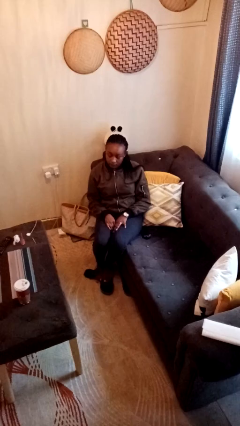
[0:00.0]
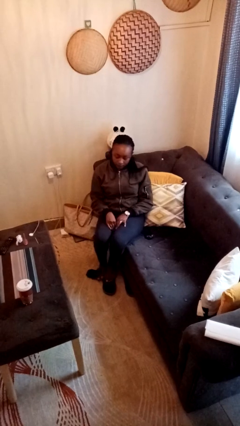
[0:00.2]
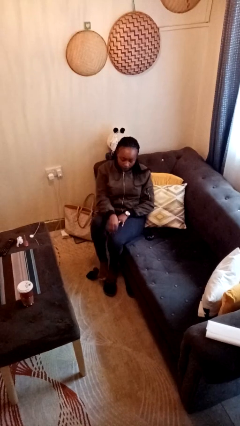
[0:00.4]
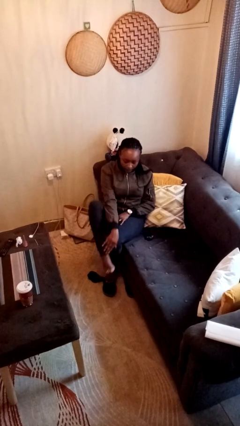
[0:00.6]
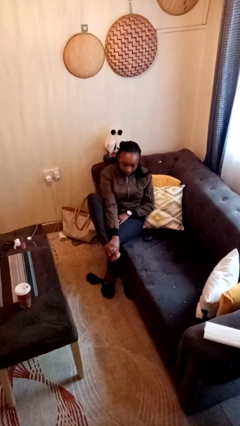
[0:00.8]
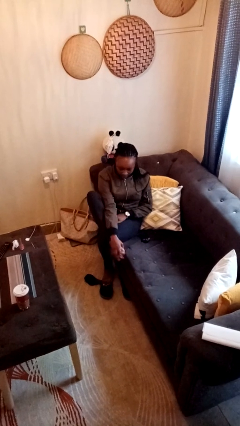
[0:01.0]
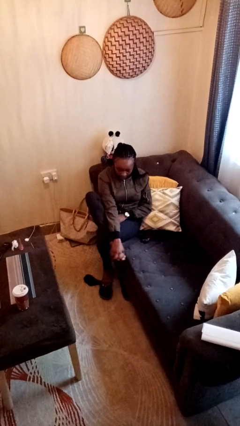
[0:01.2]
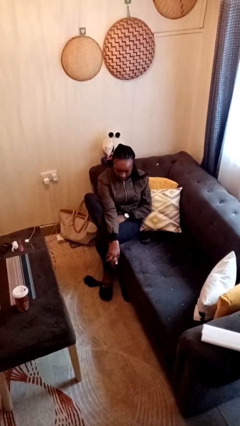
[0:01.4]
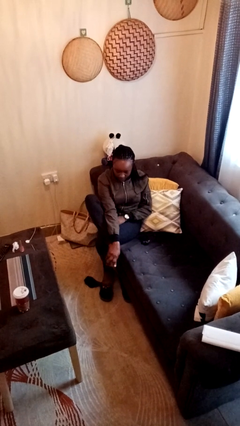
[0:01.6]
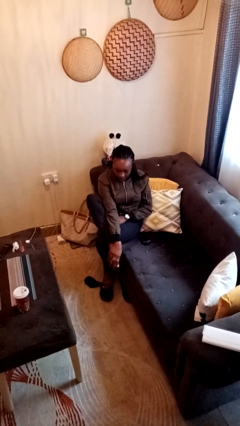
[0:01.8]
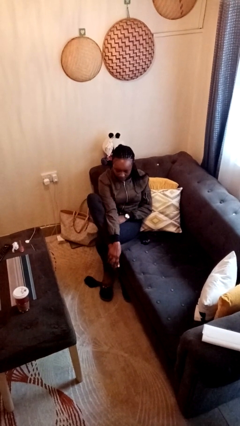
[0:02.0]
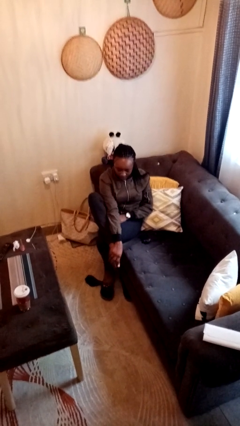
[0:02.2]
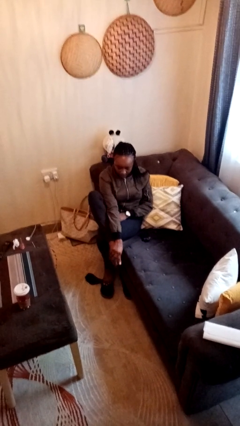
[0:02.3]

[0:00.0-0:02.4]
person rubs foot

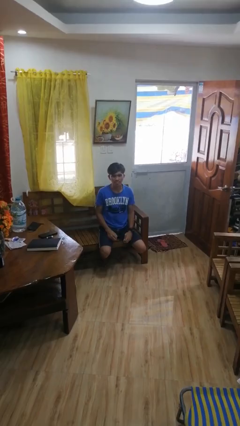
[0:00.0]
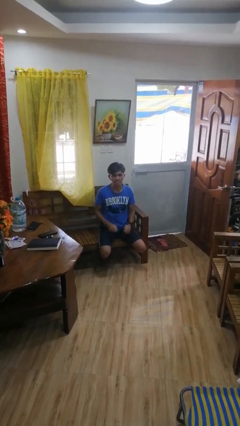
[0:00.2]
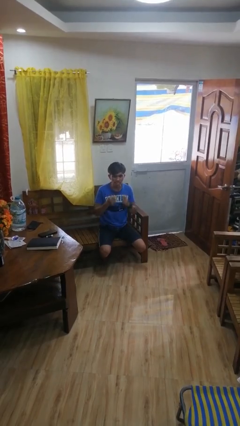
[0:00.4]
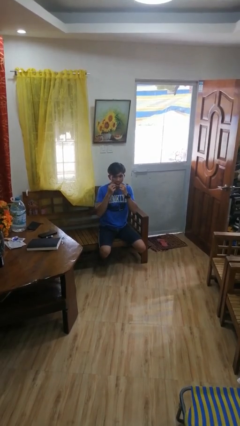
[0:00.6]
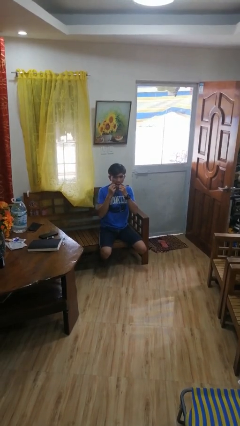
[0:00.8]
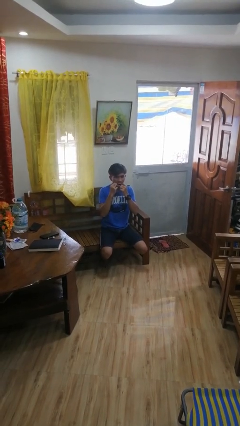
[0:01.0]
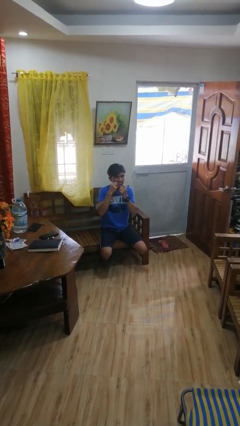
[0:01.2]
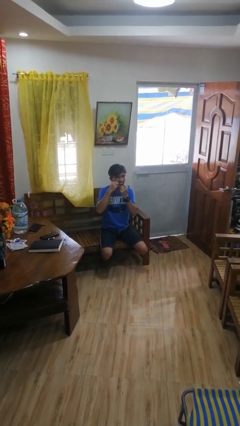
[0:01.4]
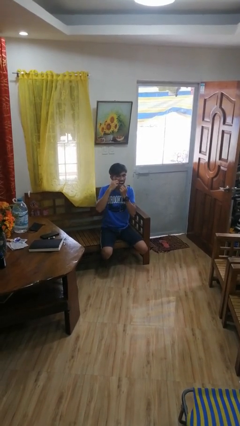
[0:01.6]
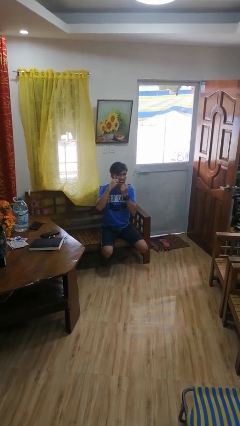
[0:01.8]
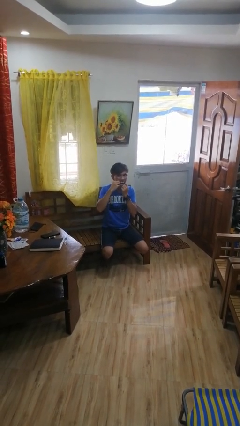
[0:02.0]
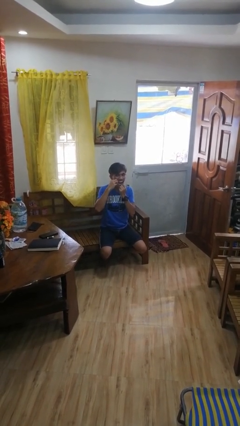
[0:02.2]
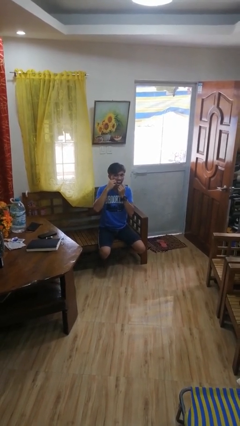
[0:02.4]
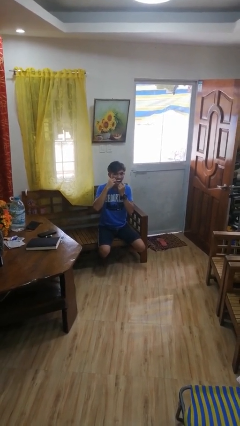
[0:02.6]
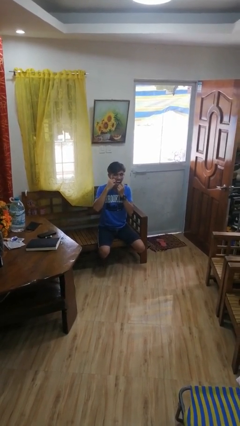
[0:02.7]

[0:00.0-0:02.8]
person flosses

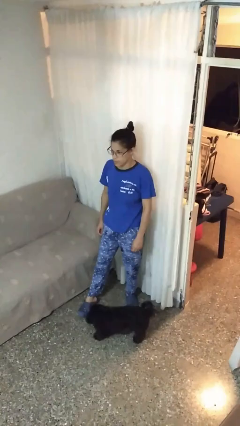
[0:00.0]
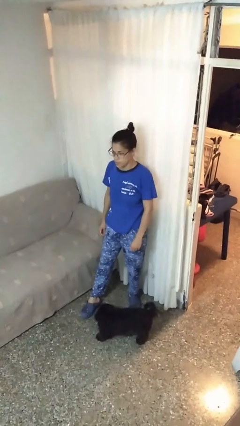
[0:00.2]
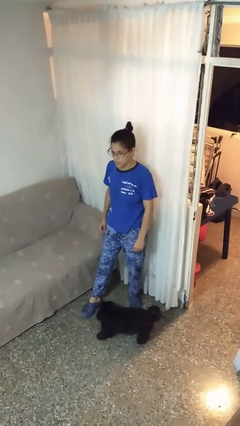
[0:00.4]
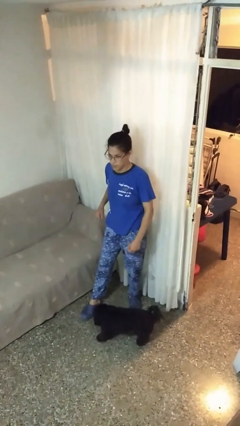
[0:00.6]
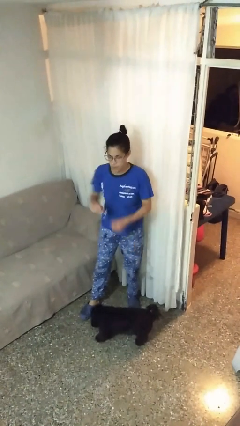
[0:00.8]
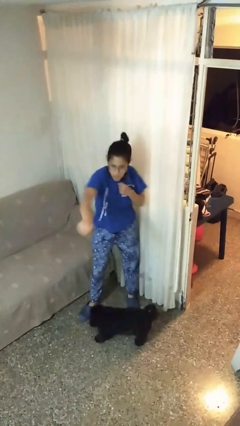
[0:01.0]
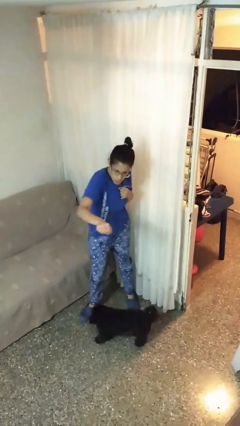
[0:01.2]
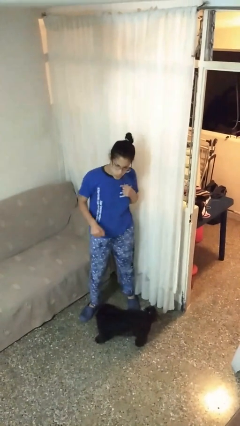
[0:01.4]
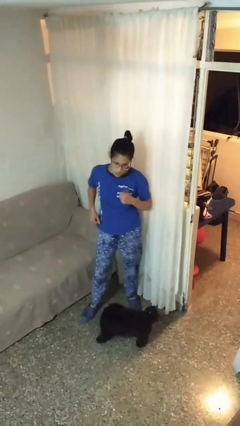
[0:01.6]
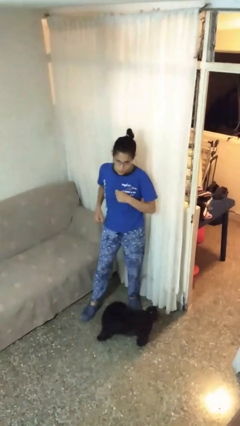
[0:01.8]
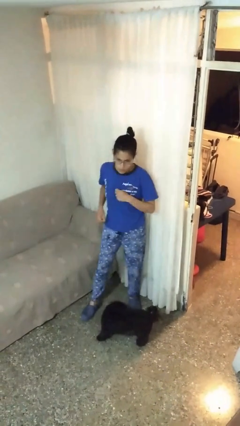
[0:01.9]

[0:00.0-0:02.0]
person punches

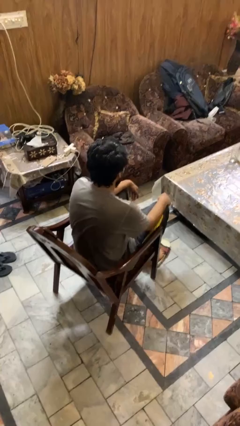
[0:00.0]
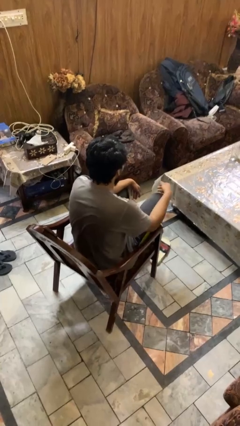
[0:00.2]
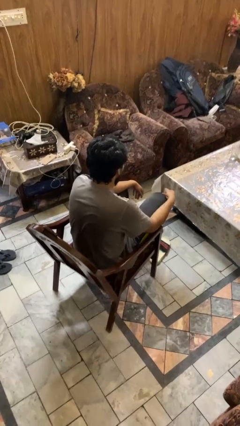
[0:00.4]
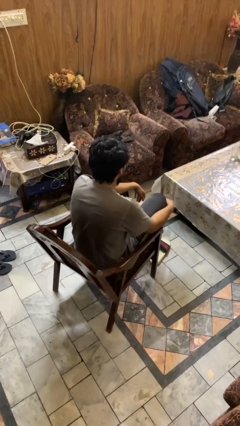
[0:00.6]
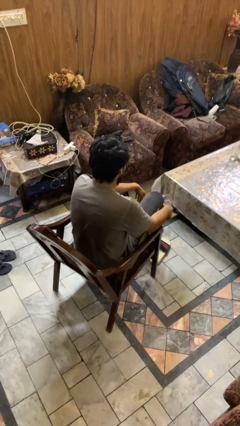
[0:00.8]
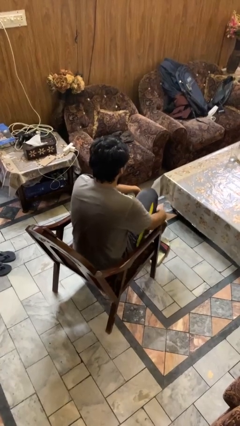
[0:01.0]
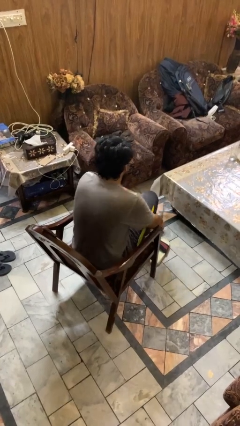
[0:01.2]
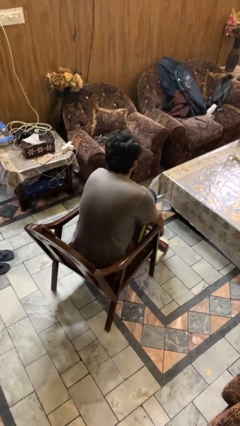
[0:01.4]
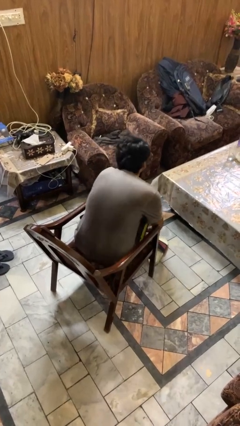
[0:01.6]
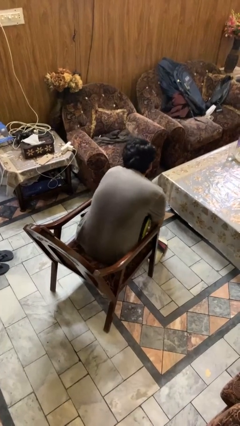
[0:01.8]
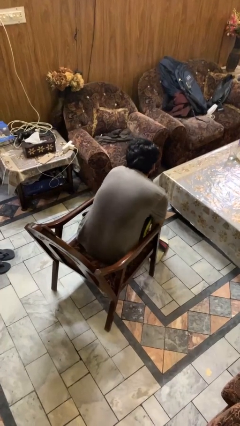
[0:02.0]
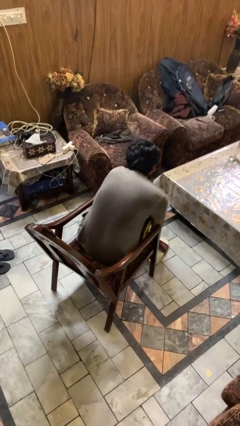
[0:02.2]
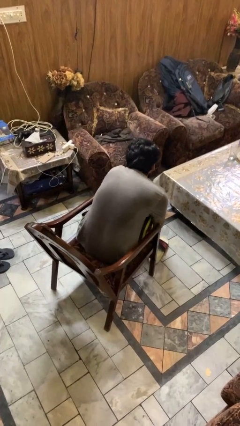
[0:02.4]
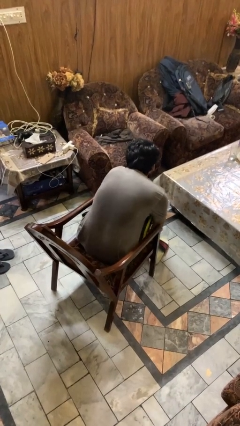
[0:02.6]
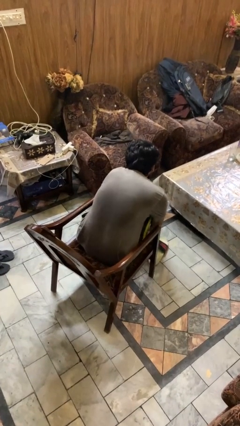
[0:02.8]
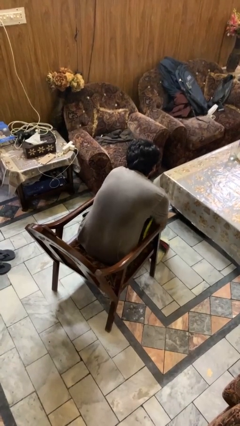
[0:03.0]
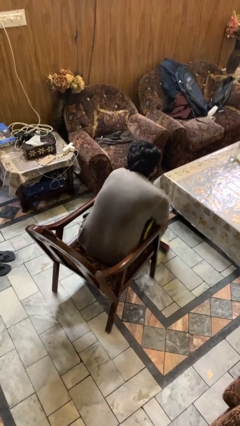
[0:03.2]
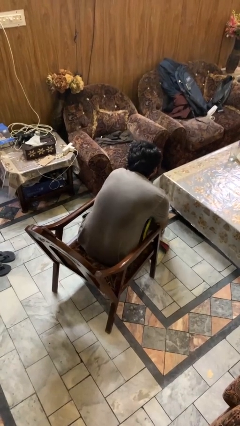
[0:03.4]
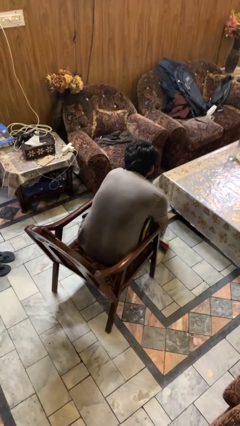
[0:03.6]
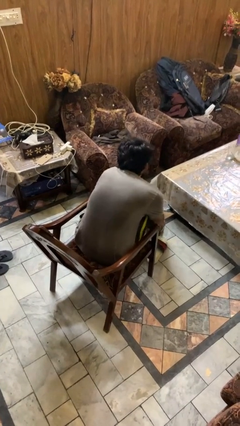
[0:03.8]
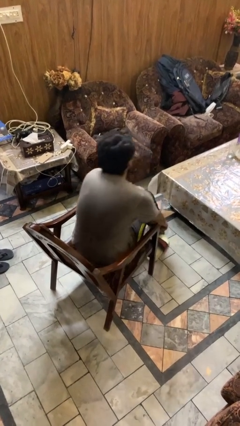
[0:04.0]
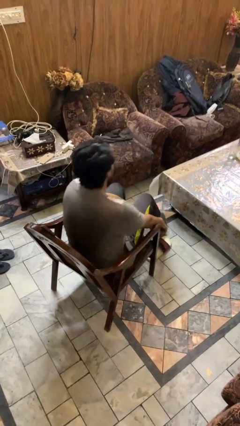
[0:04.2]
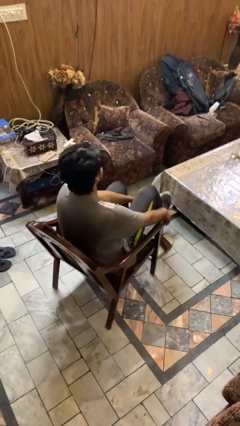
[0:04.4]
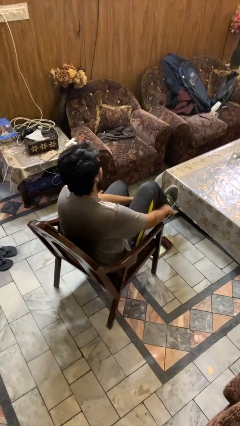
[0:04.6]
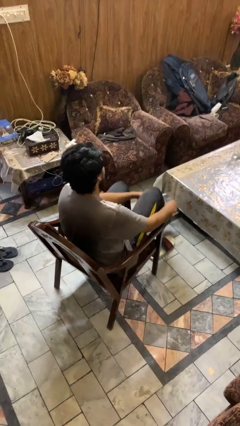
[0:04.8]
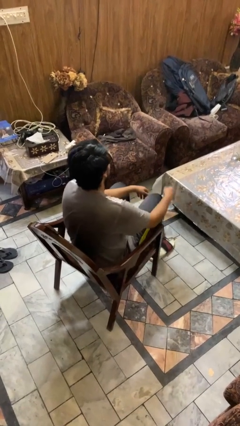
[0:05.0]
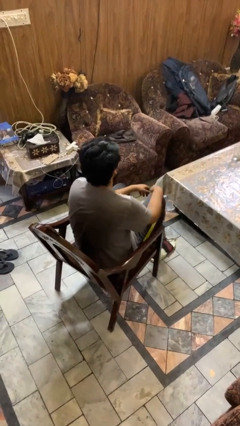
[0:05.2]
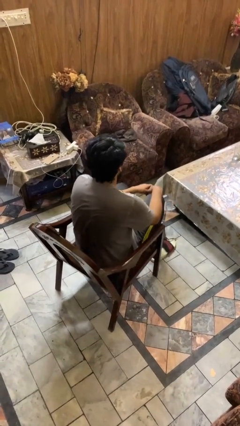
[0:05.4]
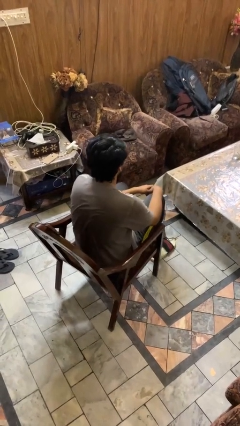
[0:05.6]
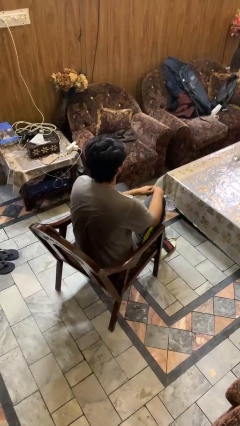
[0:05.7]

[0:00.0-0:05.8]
person puts on shoes

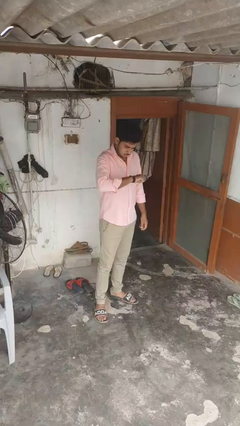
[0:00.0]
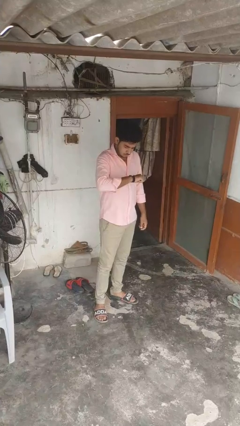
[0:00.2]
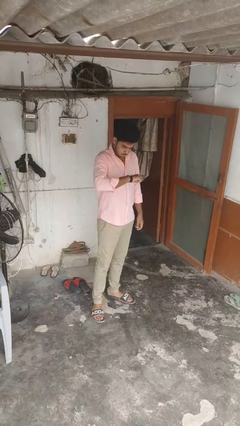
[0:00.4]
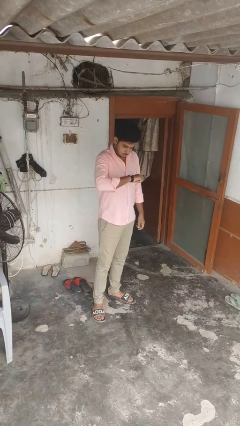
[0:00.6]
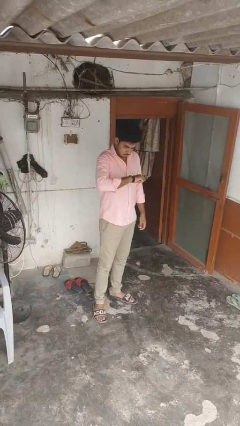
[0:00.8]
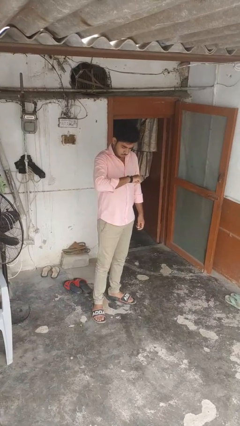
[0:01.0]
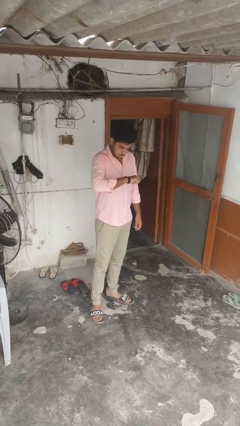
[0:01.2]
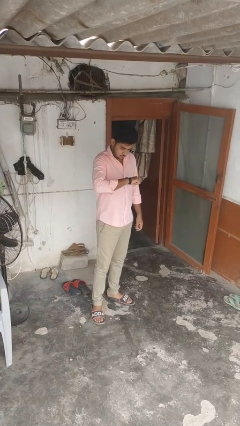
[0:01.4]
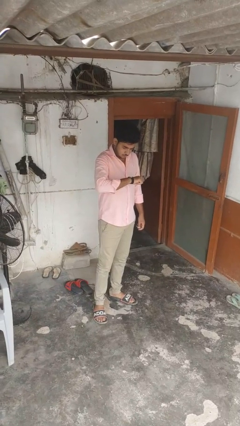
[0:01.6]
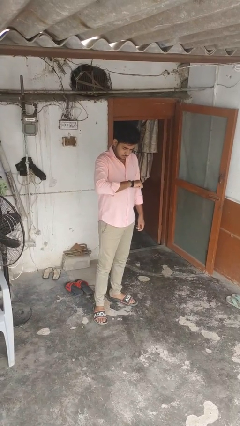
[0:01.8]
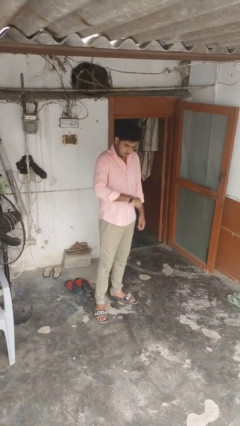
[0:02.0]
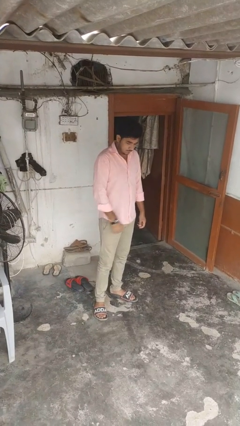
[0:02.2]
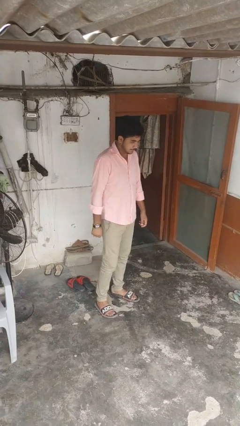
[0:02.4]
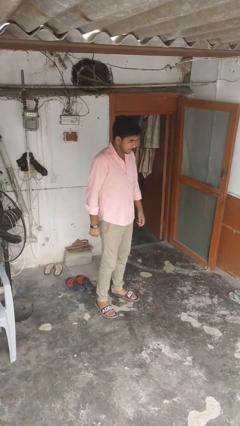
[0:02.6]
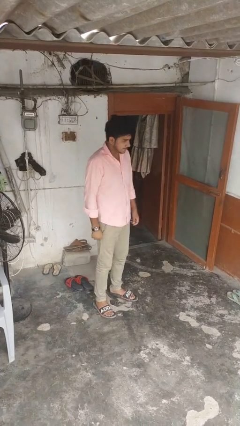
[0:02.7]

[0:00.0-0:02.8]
person looks at wristwatch

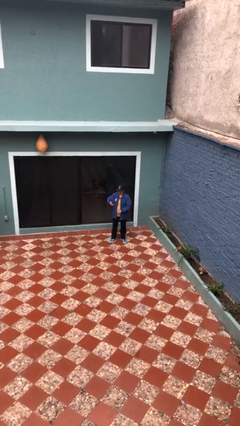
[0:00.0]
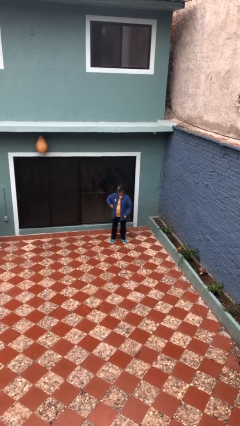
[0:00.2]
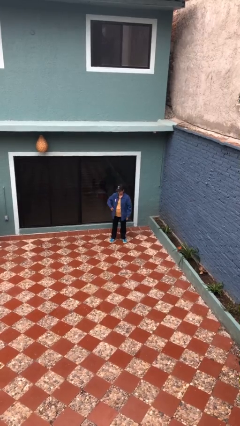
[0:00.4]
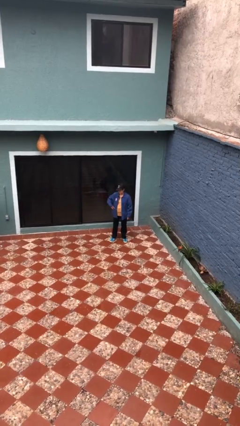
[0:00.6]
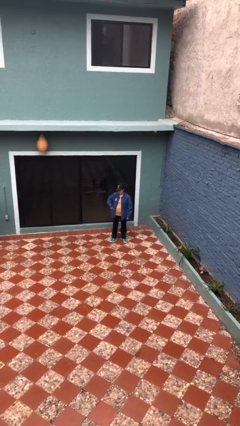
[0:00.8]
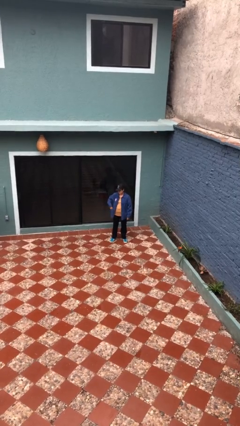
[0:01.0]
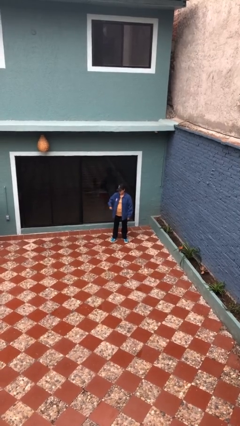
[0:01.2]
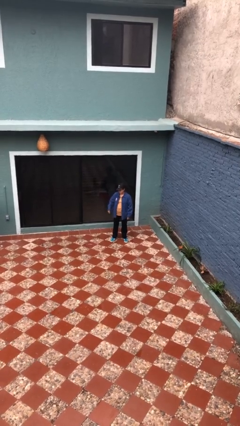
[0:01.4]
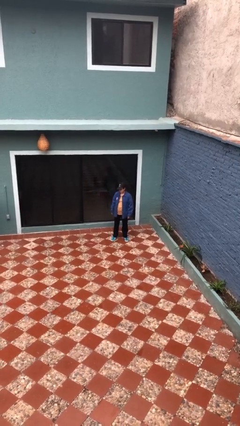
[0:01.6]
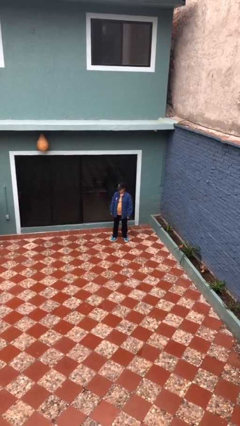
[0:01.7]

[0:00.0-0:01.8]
person puts phone into pocket
